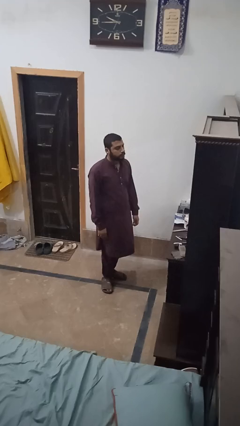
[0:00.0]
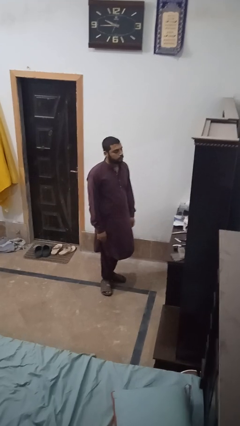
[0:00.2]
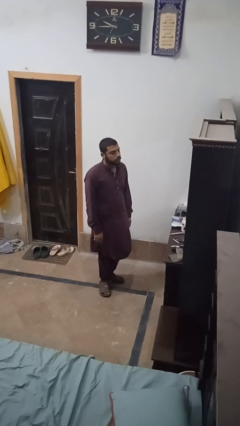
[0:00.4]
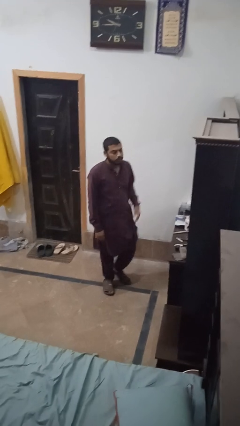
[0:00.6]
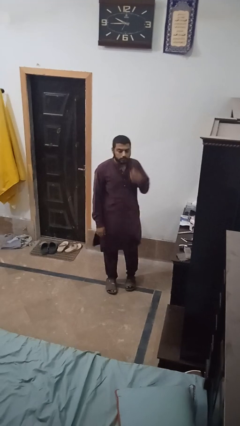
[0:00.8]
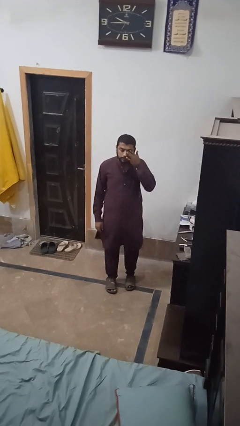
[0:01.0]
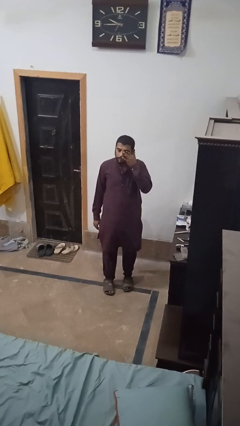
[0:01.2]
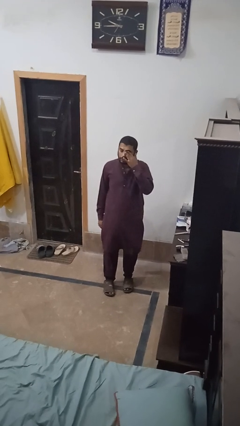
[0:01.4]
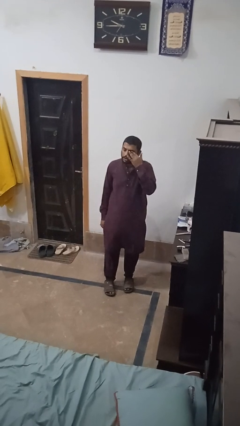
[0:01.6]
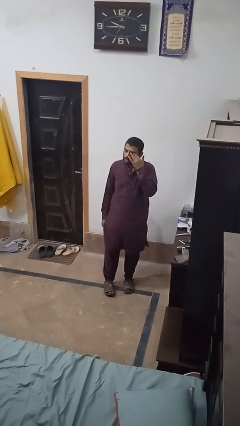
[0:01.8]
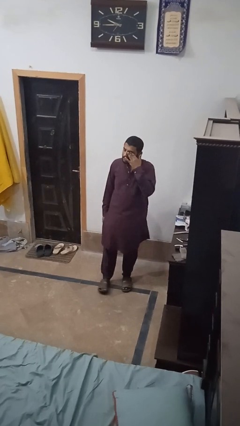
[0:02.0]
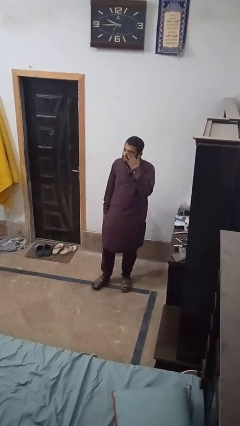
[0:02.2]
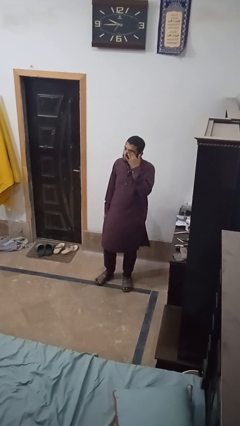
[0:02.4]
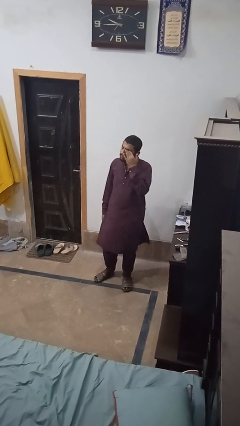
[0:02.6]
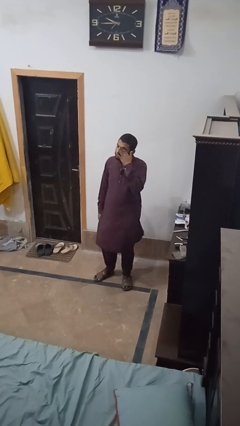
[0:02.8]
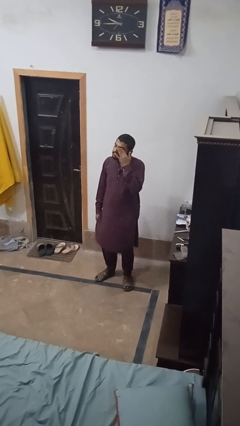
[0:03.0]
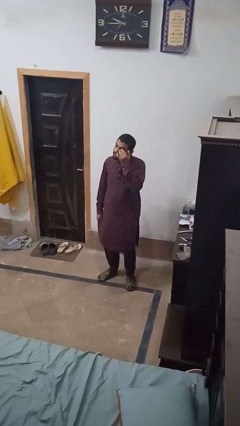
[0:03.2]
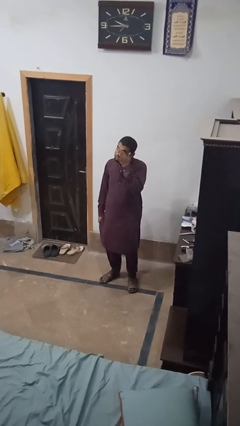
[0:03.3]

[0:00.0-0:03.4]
person rubs eyes

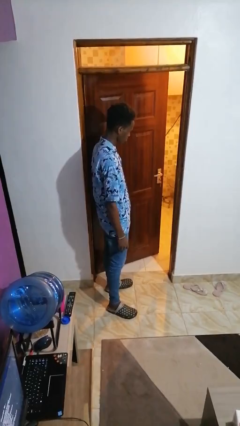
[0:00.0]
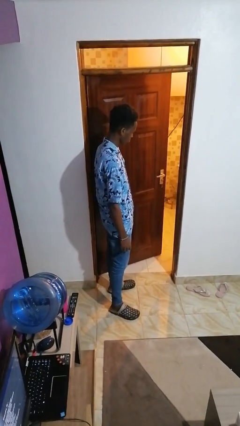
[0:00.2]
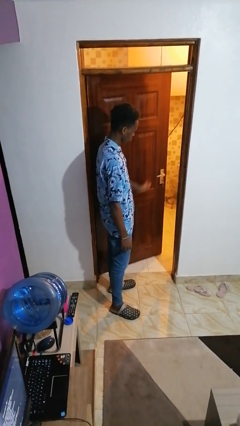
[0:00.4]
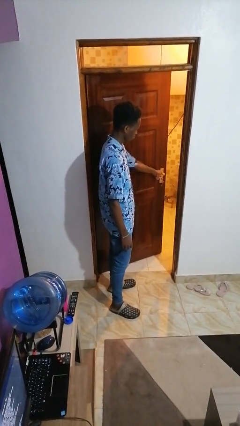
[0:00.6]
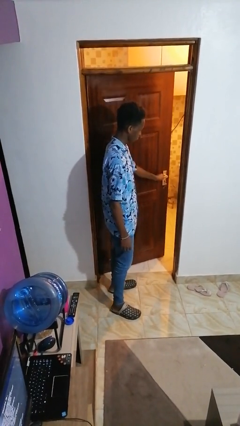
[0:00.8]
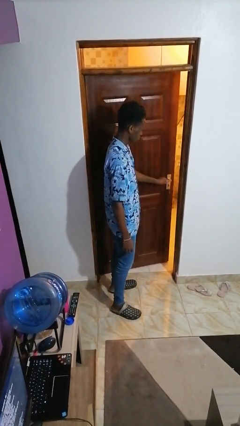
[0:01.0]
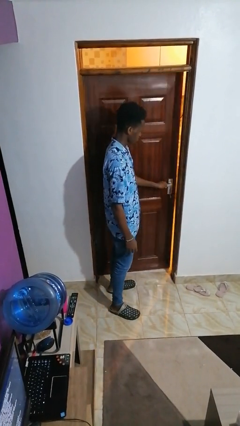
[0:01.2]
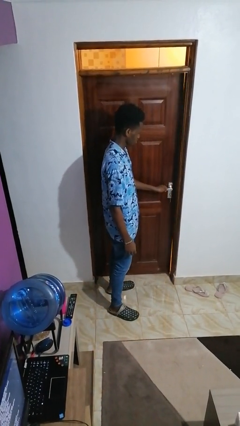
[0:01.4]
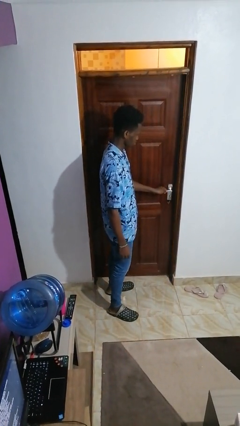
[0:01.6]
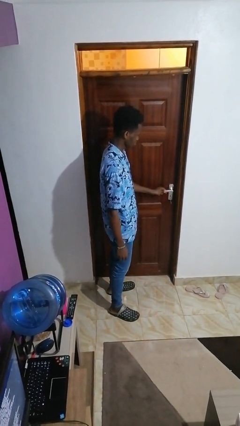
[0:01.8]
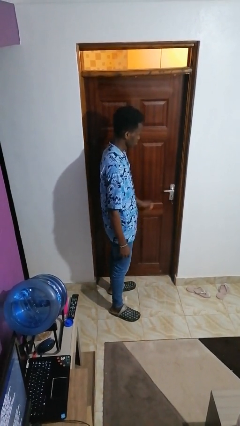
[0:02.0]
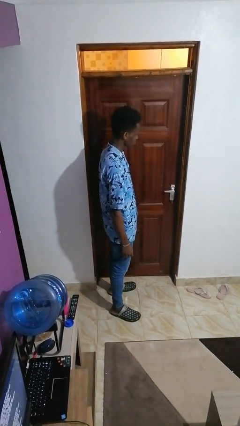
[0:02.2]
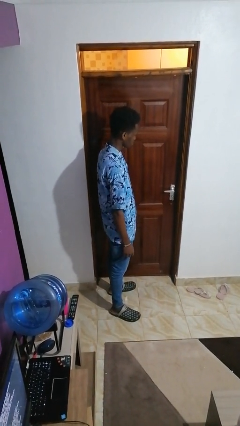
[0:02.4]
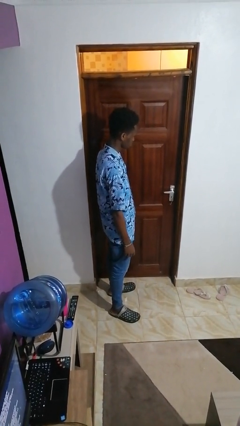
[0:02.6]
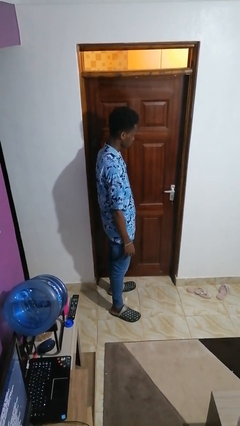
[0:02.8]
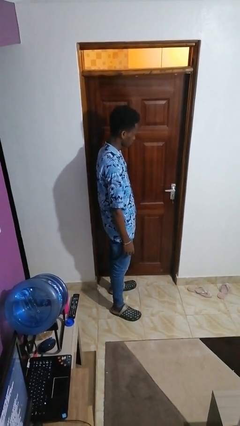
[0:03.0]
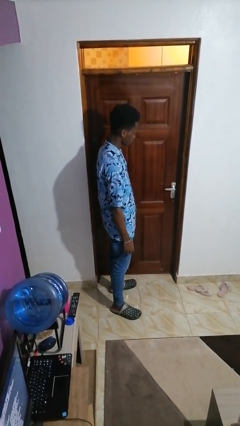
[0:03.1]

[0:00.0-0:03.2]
person closes facility door

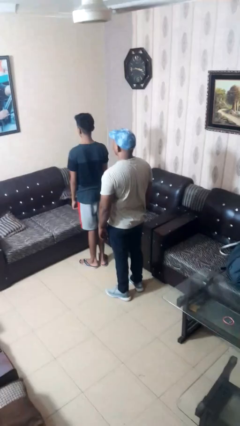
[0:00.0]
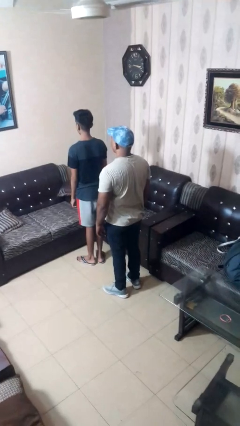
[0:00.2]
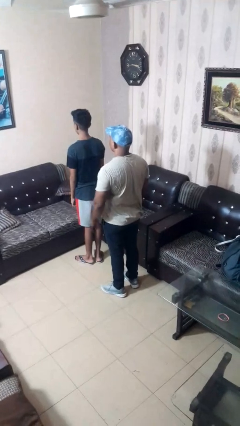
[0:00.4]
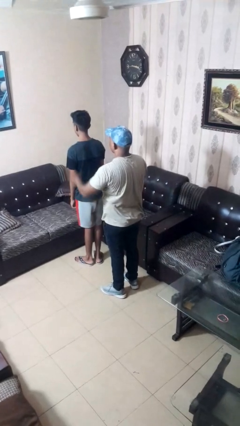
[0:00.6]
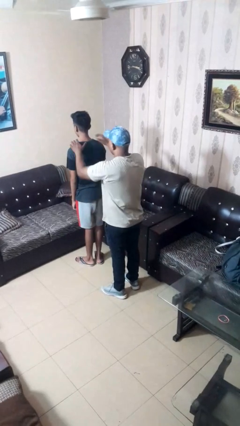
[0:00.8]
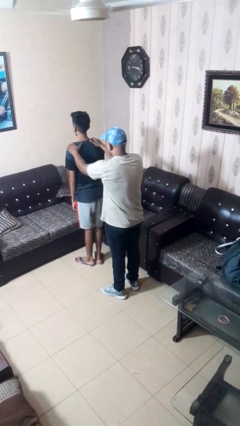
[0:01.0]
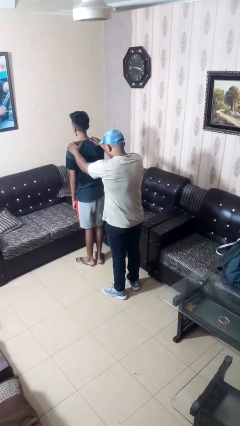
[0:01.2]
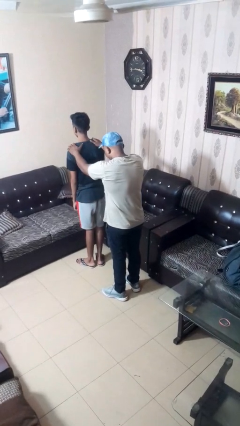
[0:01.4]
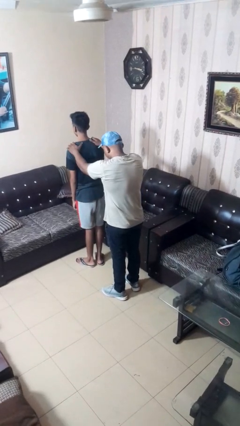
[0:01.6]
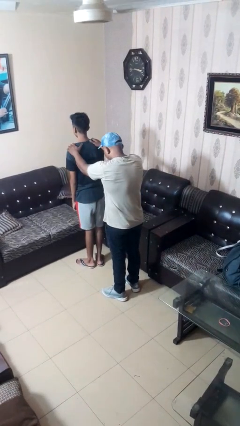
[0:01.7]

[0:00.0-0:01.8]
person grabs person by shoulder

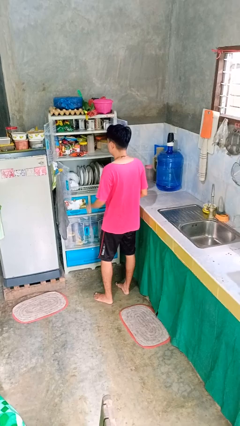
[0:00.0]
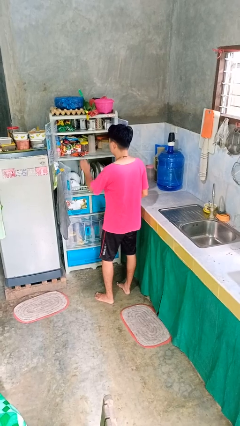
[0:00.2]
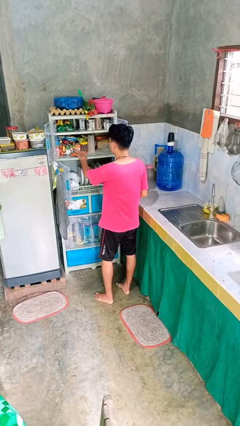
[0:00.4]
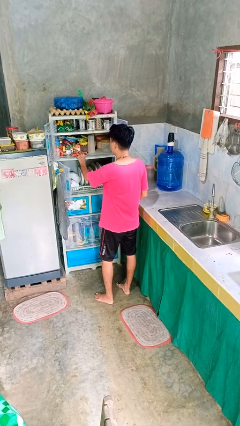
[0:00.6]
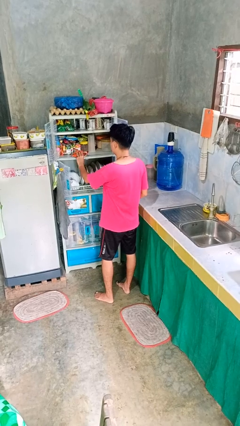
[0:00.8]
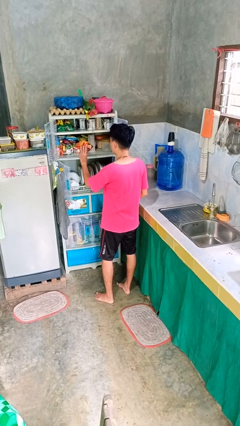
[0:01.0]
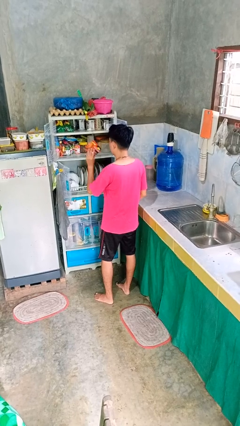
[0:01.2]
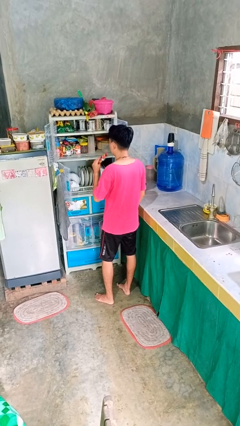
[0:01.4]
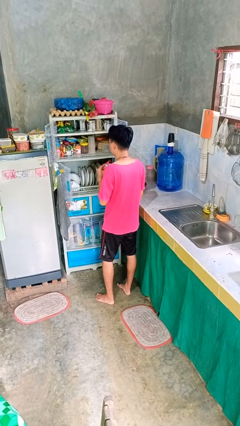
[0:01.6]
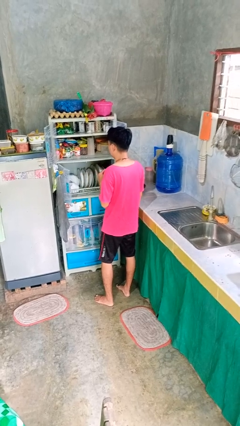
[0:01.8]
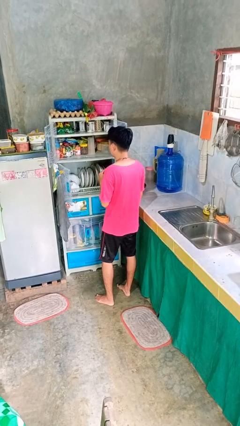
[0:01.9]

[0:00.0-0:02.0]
person takes object from cabinet

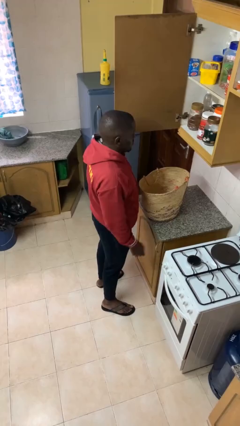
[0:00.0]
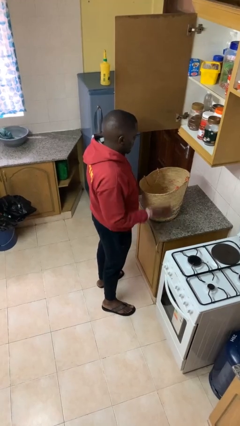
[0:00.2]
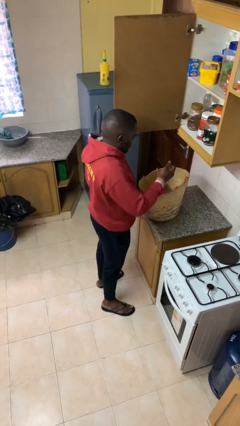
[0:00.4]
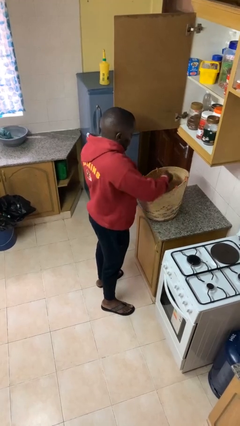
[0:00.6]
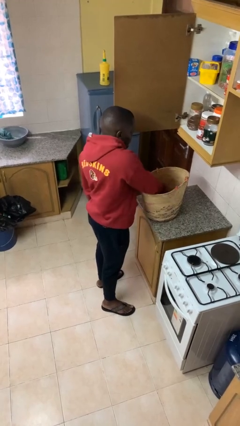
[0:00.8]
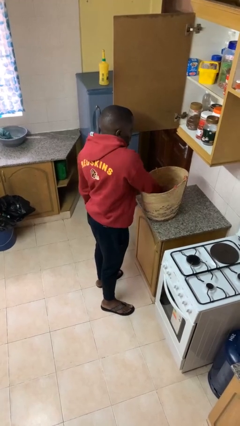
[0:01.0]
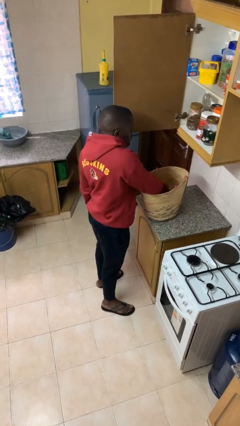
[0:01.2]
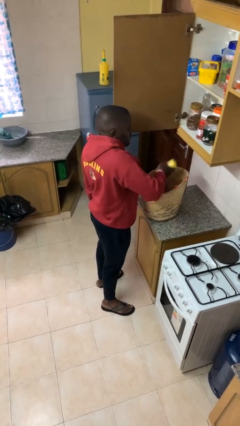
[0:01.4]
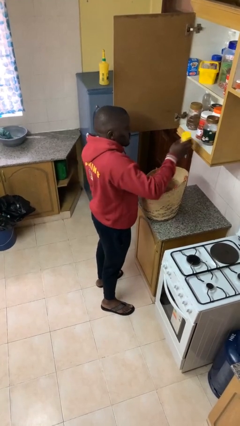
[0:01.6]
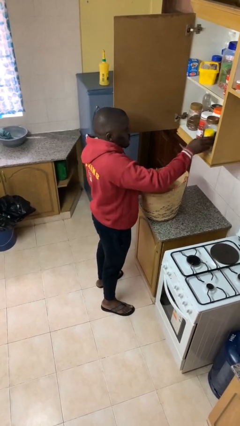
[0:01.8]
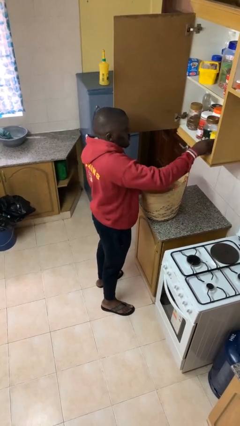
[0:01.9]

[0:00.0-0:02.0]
person loads groceries into cabinet

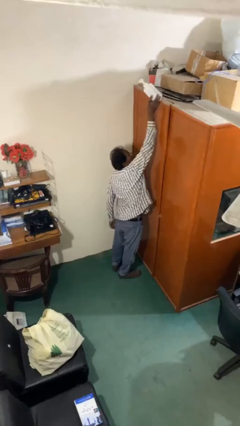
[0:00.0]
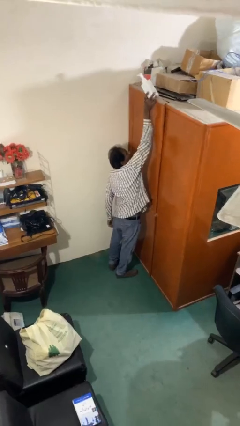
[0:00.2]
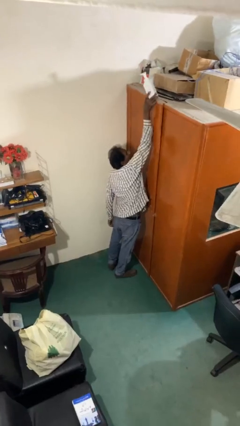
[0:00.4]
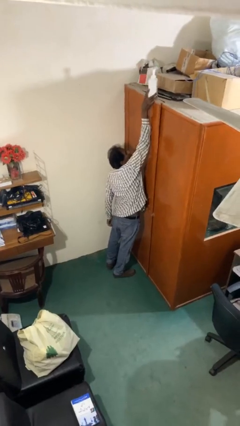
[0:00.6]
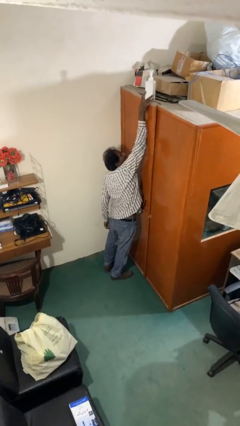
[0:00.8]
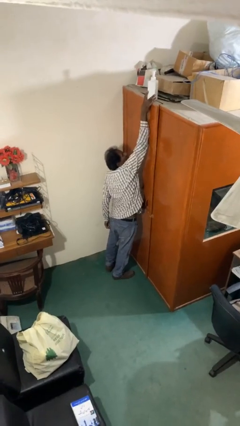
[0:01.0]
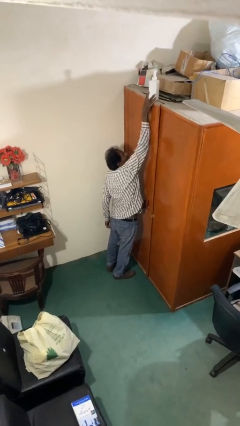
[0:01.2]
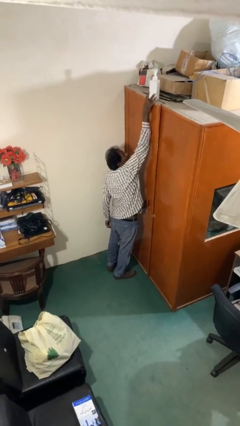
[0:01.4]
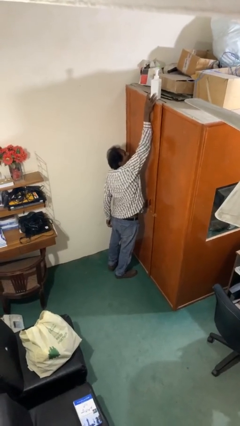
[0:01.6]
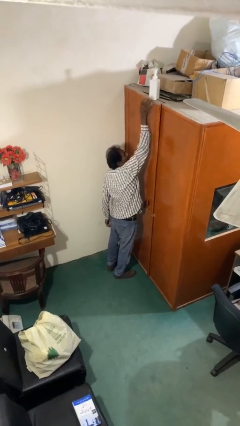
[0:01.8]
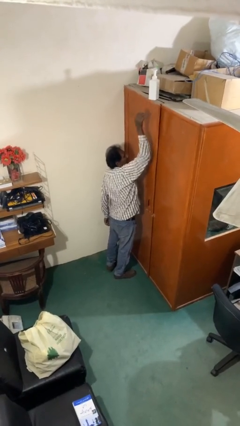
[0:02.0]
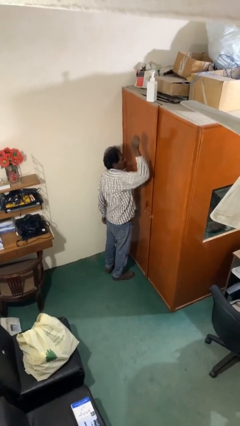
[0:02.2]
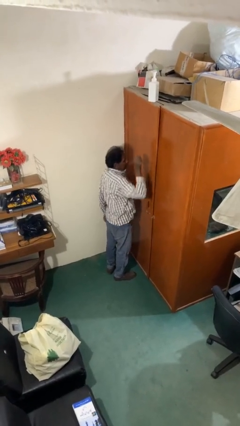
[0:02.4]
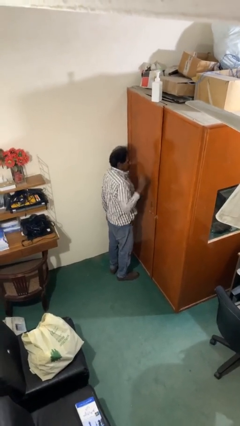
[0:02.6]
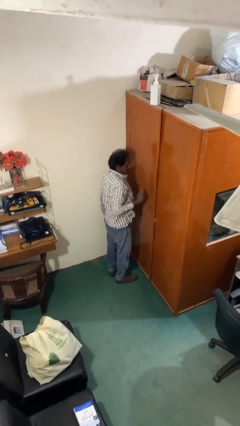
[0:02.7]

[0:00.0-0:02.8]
person puts down object on shelf

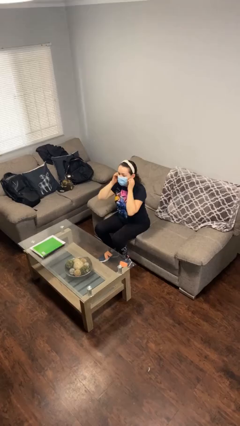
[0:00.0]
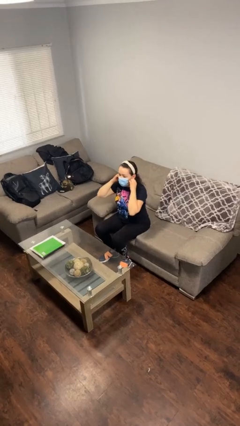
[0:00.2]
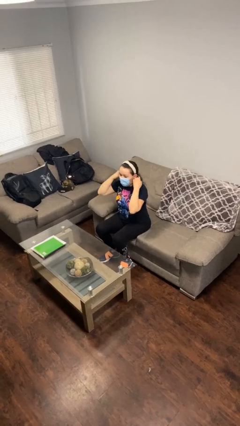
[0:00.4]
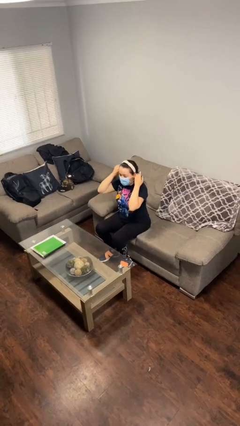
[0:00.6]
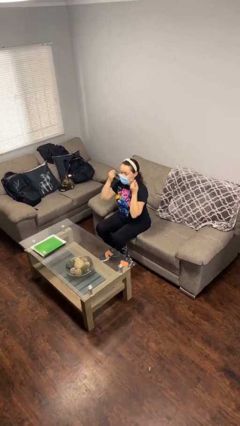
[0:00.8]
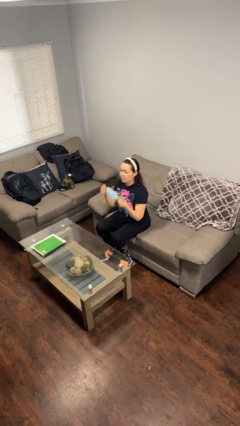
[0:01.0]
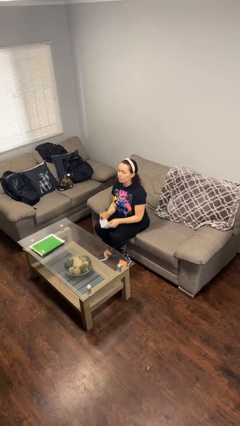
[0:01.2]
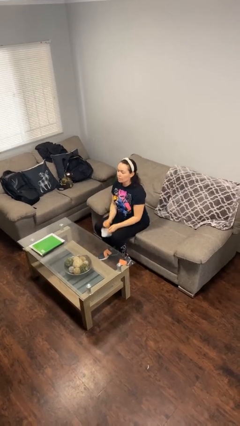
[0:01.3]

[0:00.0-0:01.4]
person takes off facemask

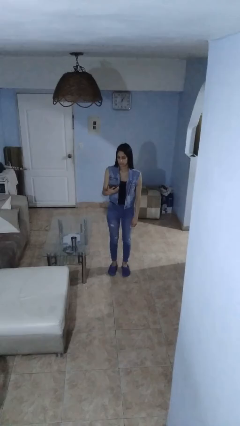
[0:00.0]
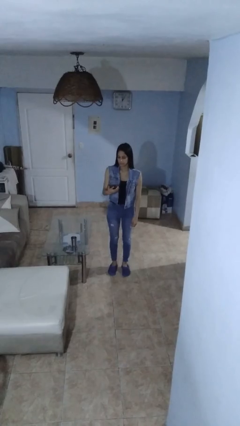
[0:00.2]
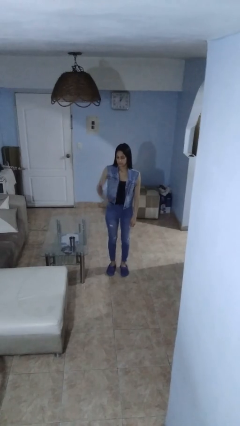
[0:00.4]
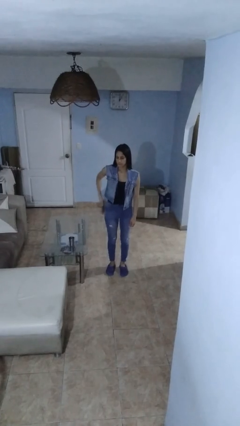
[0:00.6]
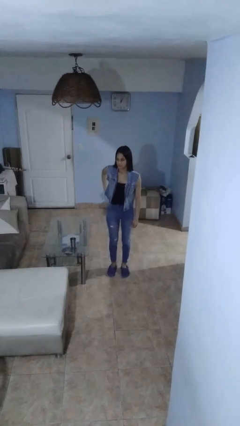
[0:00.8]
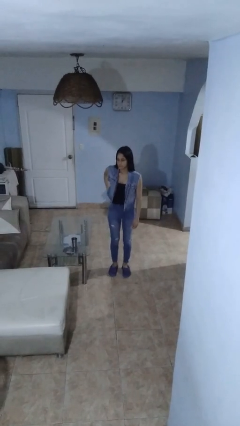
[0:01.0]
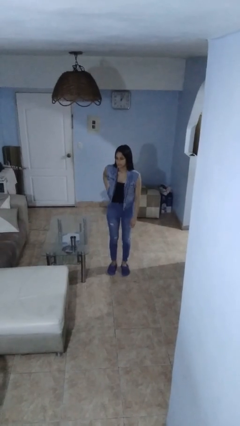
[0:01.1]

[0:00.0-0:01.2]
person puts phone into pocket
